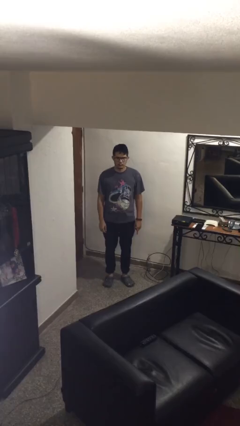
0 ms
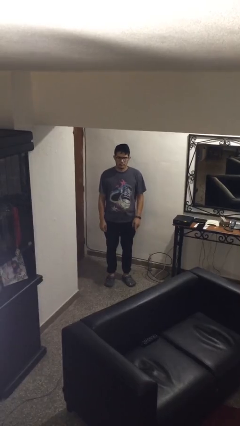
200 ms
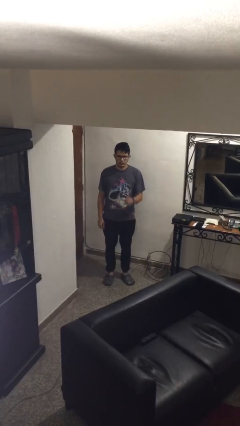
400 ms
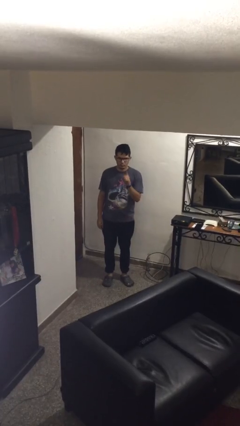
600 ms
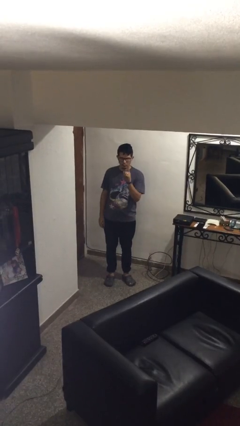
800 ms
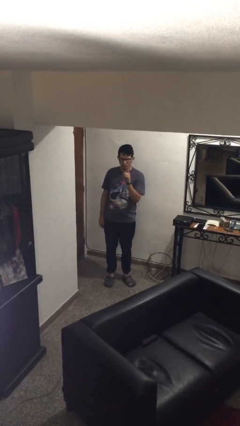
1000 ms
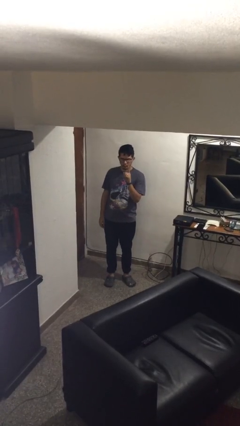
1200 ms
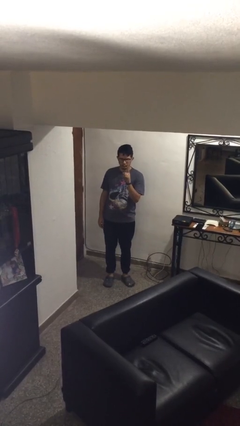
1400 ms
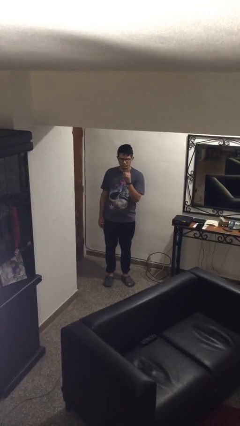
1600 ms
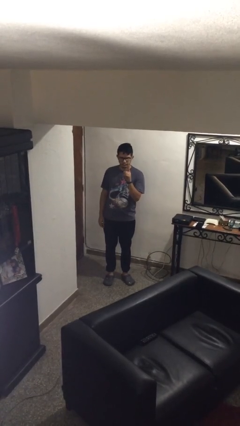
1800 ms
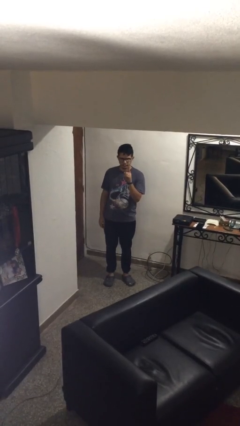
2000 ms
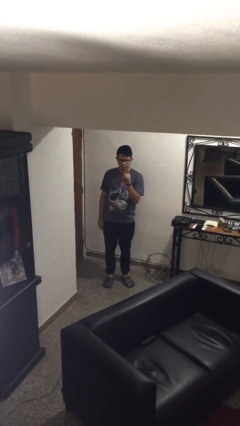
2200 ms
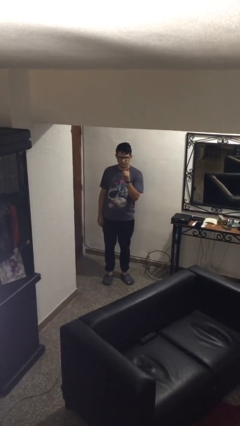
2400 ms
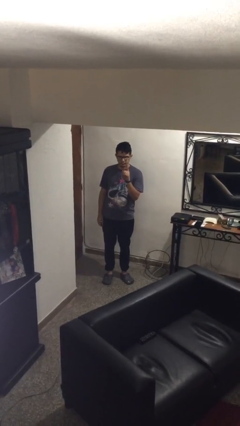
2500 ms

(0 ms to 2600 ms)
person gestures number one

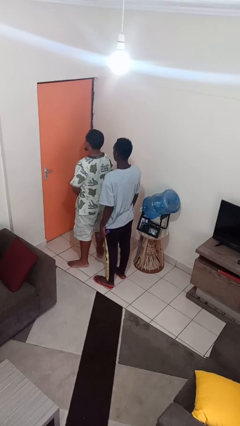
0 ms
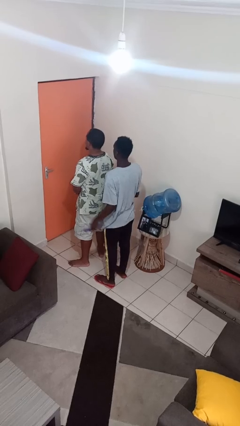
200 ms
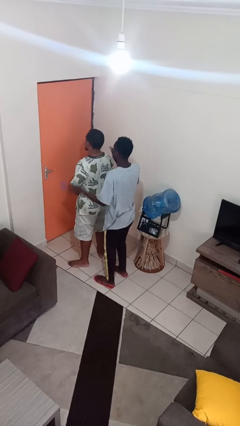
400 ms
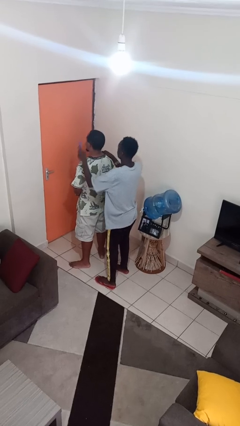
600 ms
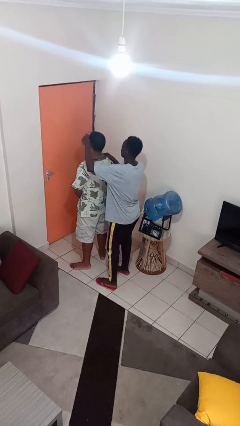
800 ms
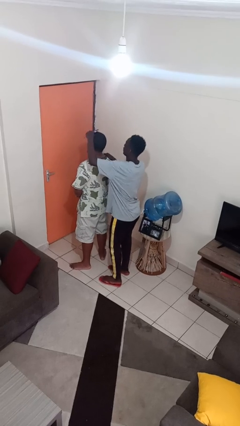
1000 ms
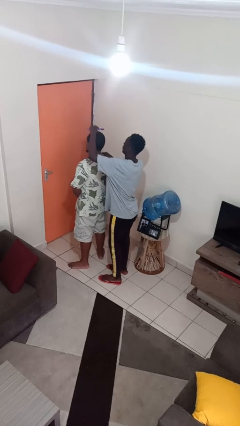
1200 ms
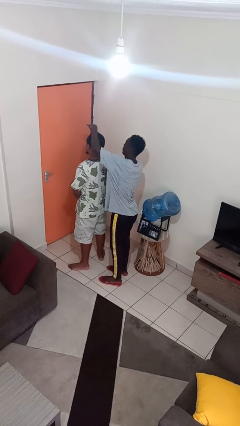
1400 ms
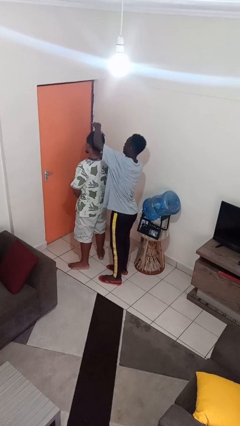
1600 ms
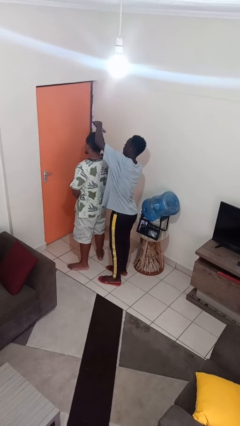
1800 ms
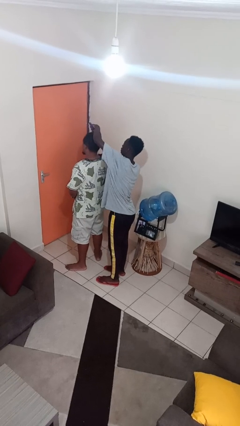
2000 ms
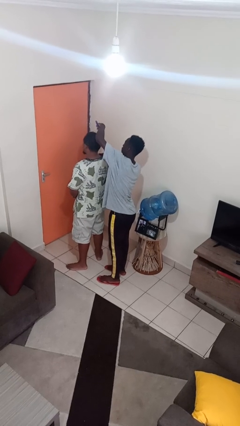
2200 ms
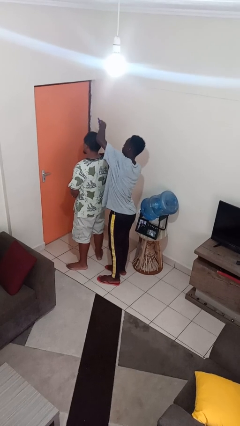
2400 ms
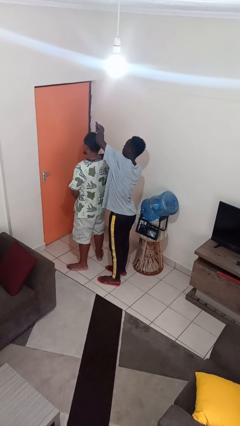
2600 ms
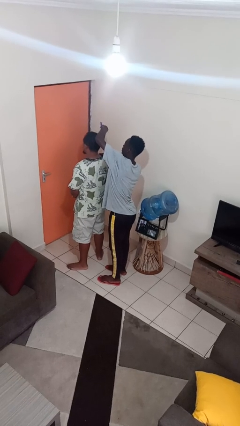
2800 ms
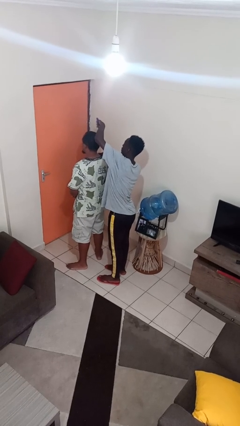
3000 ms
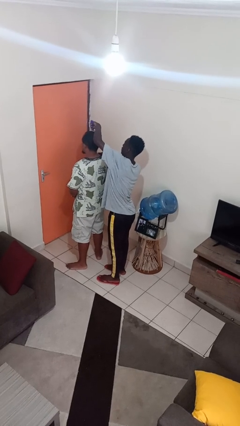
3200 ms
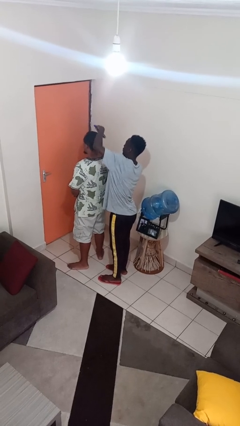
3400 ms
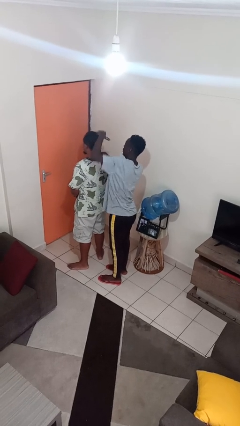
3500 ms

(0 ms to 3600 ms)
person brushes hair of person

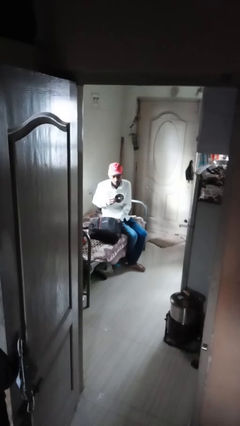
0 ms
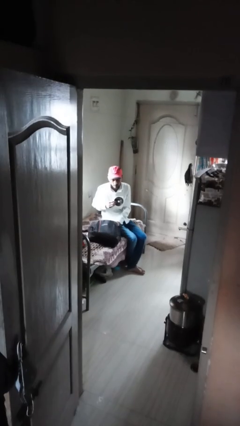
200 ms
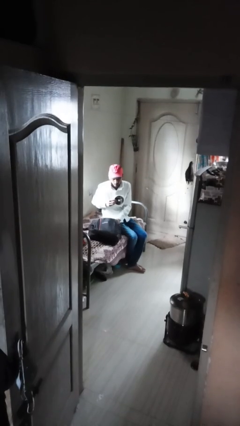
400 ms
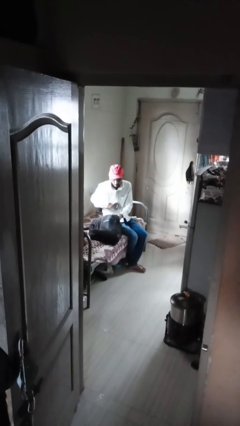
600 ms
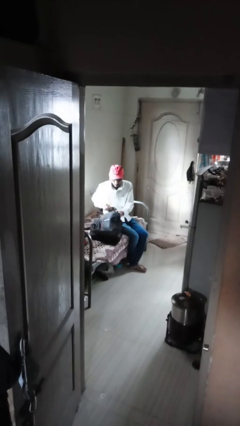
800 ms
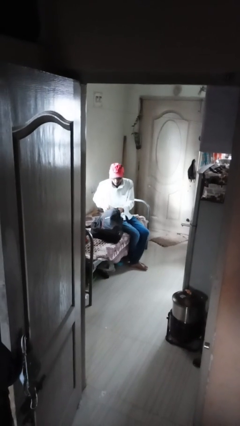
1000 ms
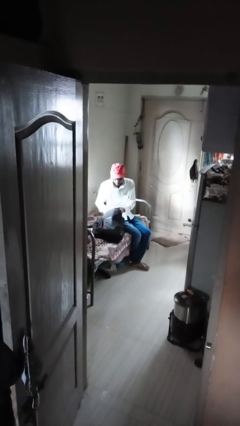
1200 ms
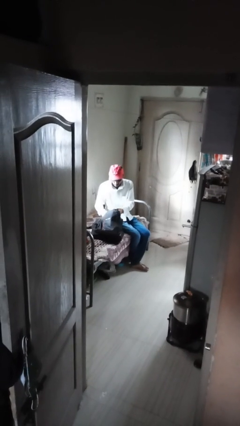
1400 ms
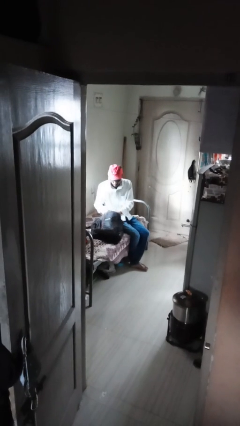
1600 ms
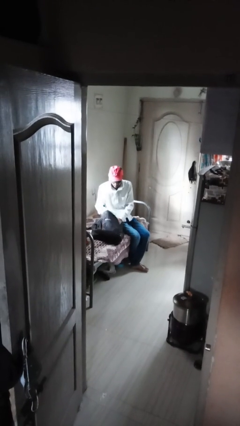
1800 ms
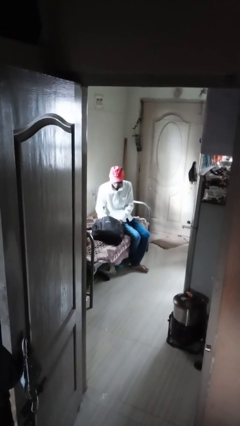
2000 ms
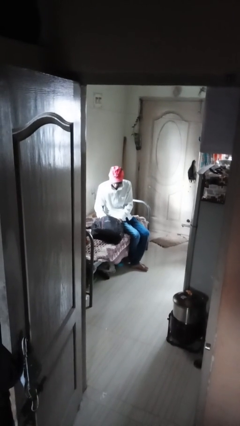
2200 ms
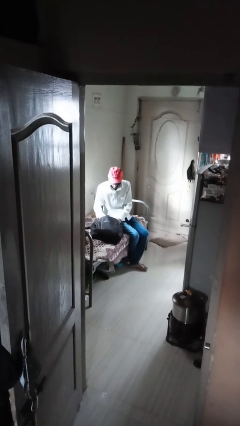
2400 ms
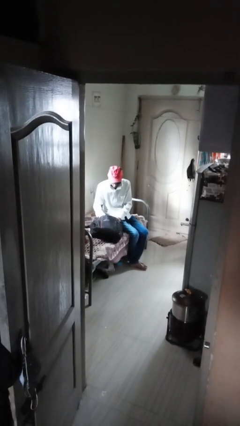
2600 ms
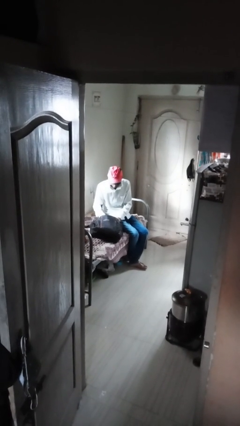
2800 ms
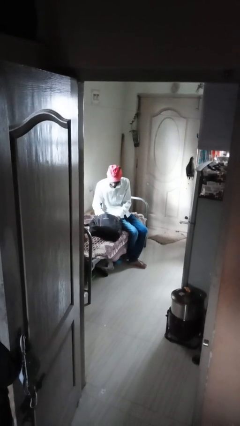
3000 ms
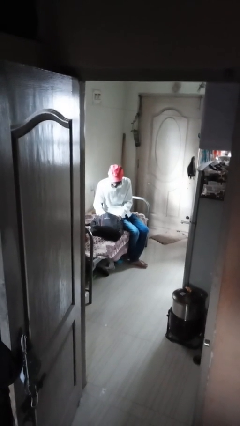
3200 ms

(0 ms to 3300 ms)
person puts object into backpack

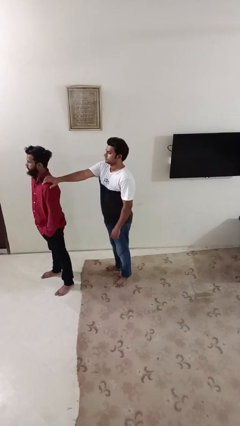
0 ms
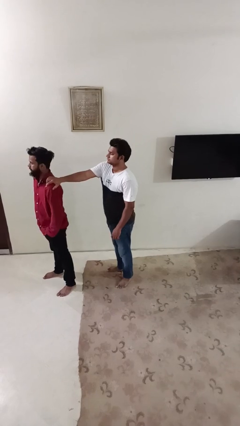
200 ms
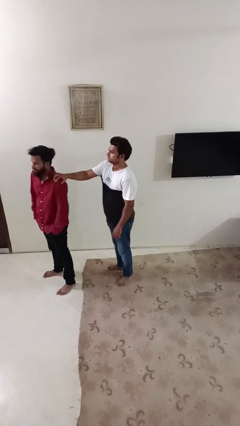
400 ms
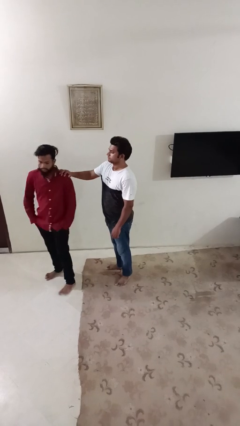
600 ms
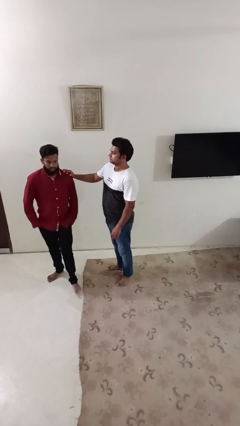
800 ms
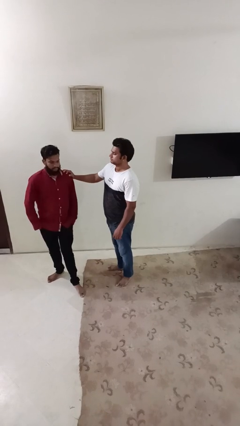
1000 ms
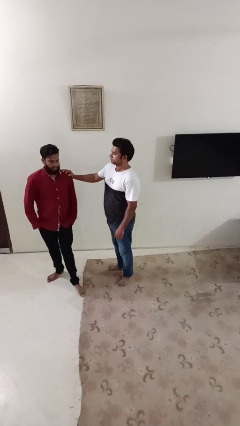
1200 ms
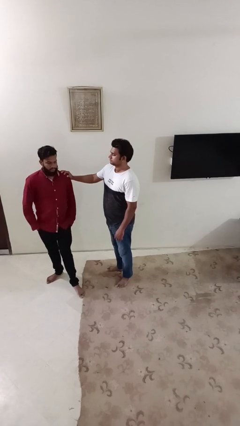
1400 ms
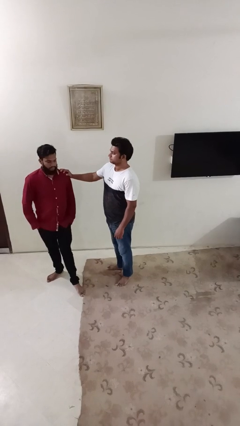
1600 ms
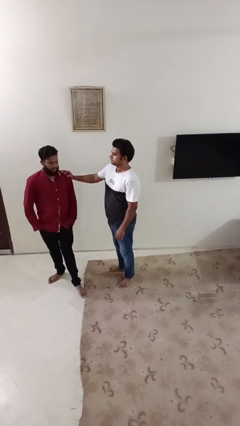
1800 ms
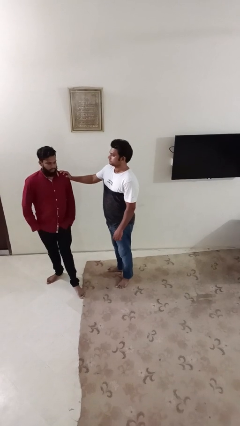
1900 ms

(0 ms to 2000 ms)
person spins person around

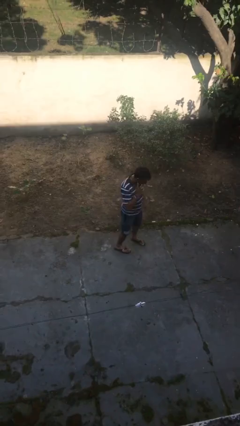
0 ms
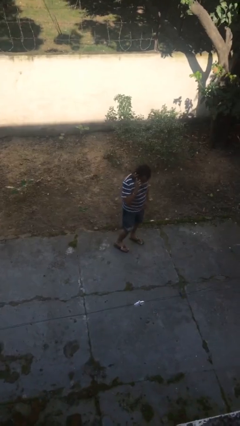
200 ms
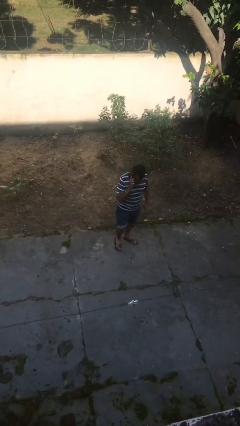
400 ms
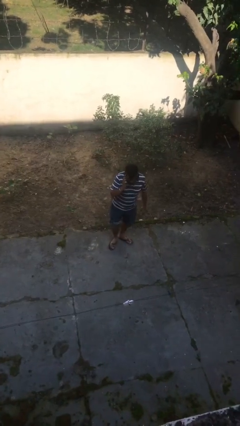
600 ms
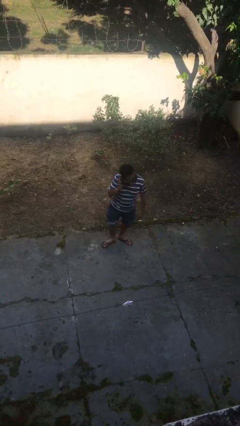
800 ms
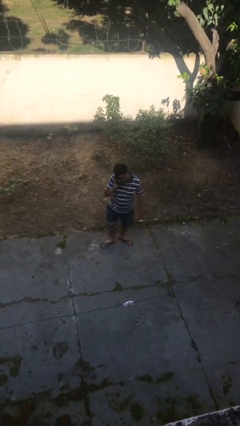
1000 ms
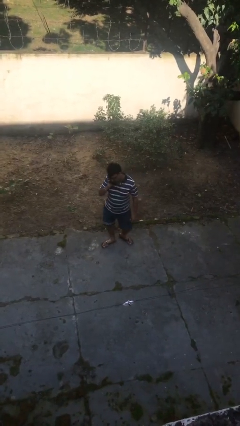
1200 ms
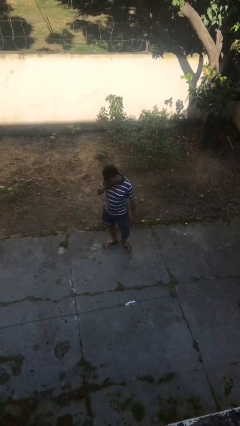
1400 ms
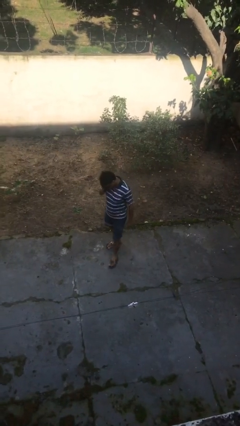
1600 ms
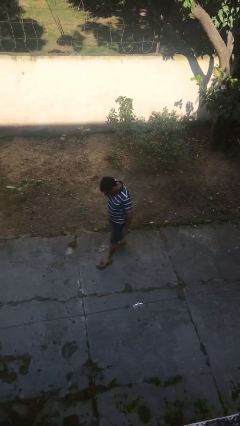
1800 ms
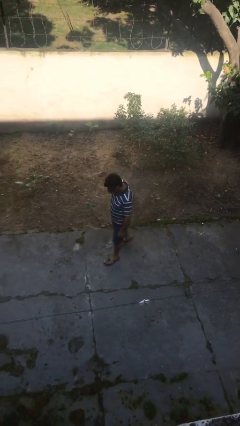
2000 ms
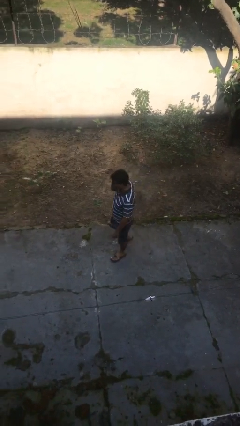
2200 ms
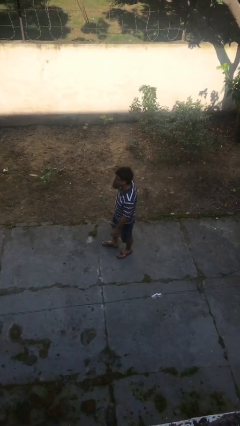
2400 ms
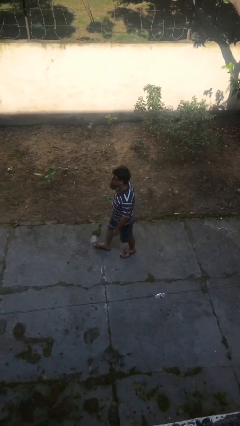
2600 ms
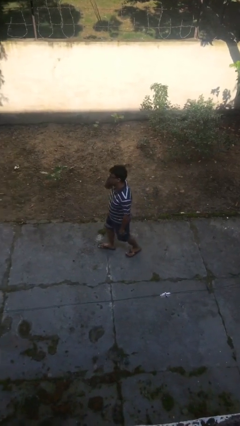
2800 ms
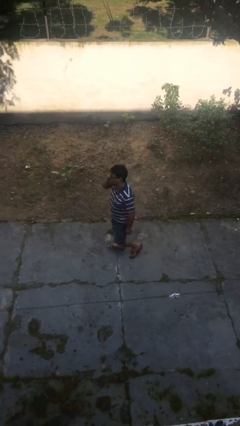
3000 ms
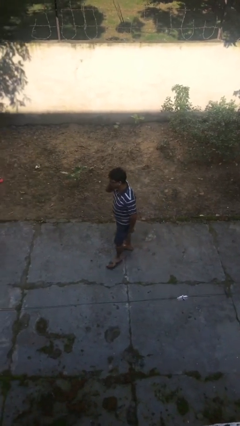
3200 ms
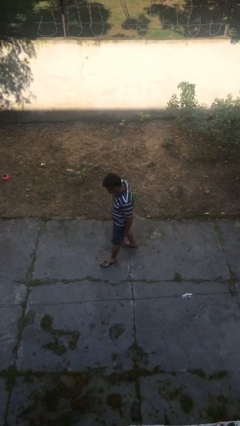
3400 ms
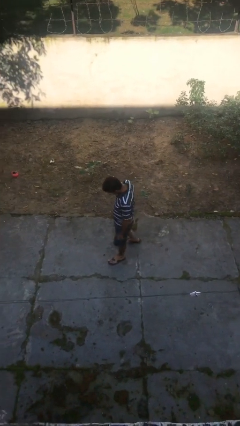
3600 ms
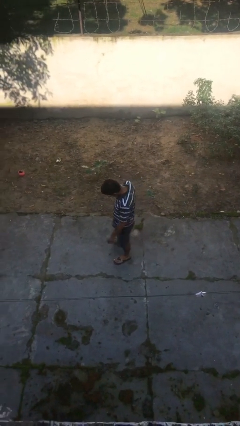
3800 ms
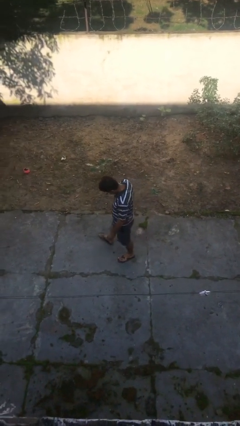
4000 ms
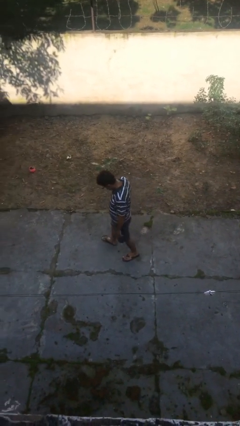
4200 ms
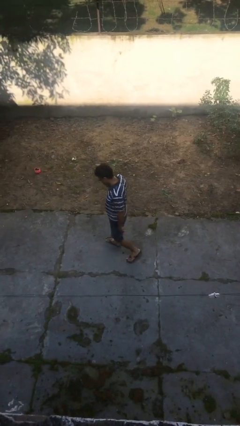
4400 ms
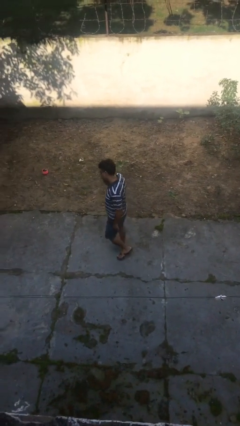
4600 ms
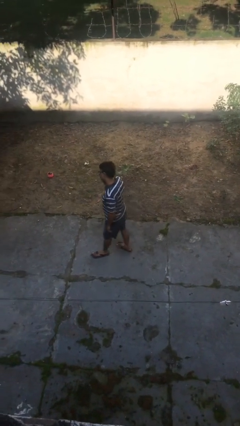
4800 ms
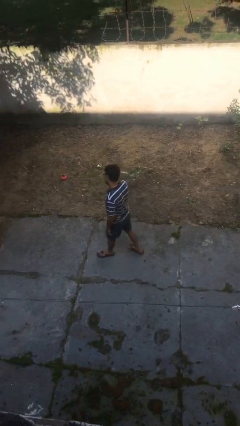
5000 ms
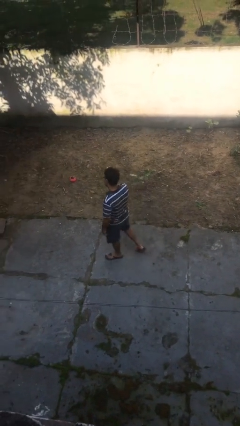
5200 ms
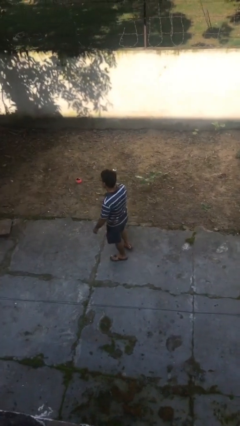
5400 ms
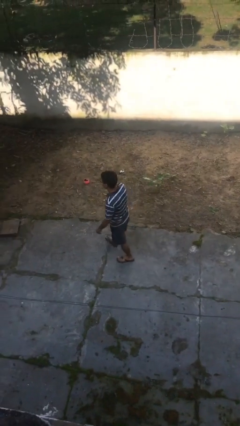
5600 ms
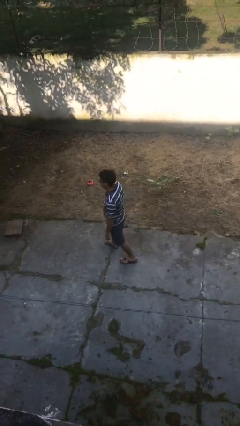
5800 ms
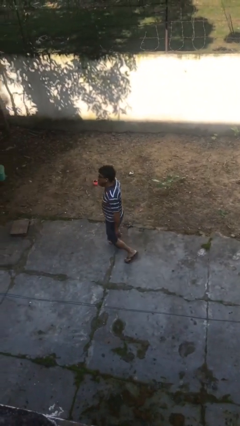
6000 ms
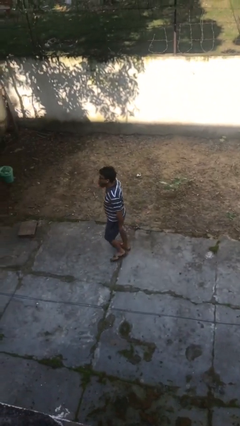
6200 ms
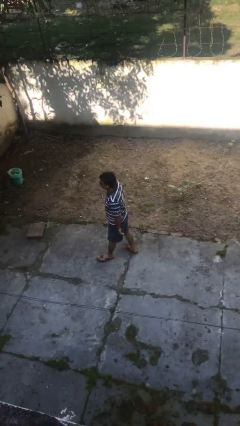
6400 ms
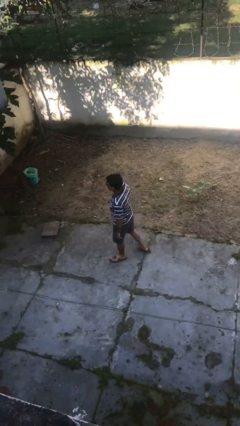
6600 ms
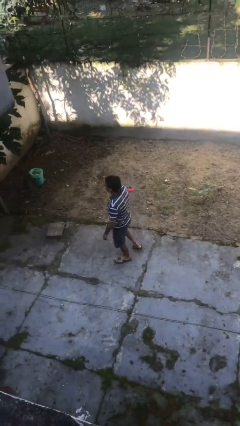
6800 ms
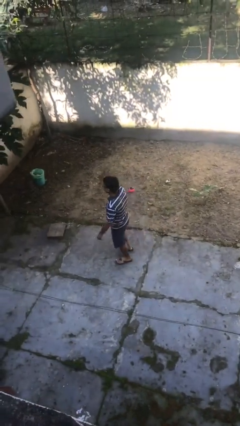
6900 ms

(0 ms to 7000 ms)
person talks on phone
